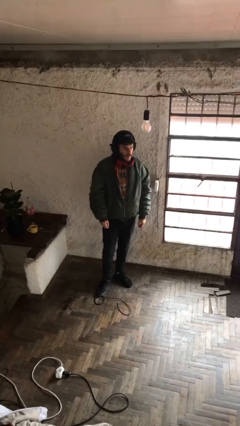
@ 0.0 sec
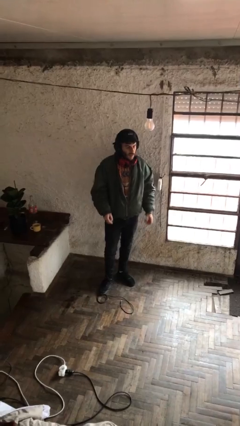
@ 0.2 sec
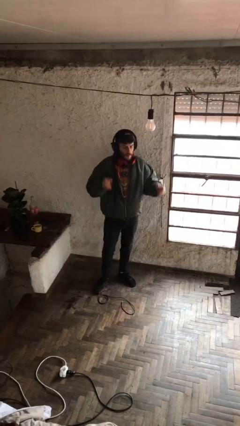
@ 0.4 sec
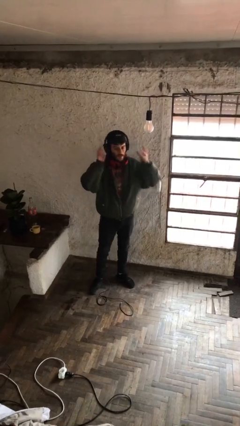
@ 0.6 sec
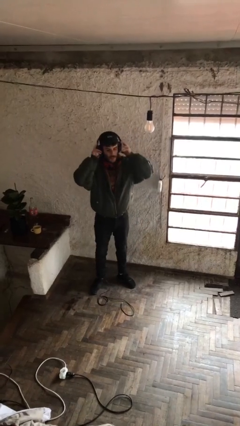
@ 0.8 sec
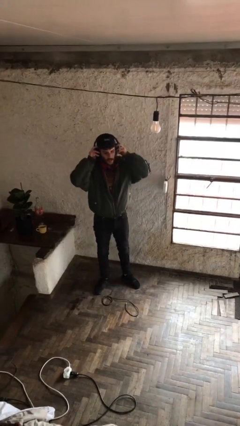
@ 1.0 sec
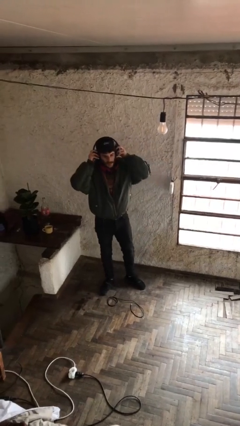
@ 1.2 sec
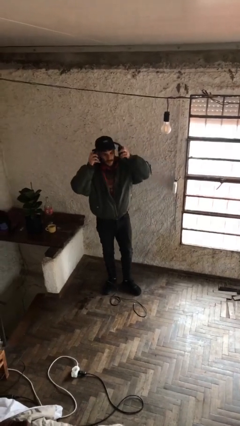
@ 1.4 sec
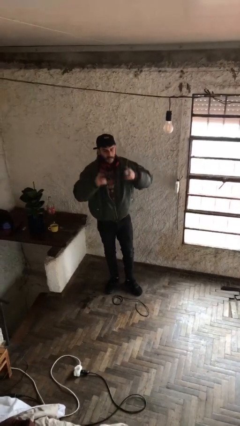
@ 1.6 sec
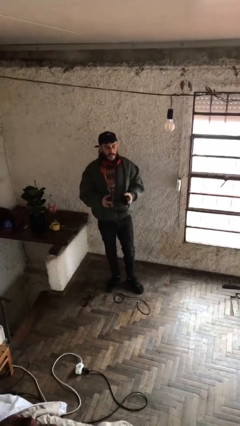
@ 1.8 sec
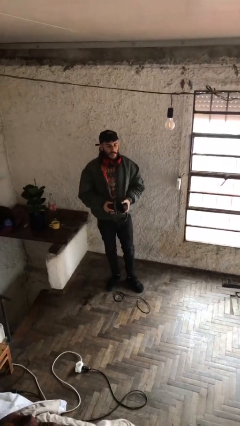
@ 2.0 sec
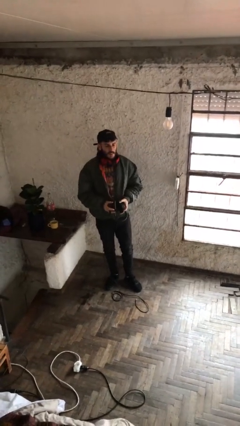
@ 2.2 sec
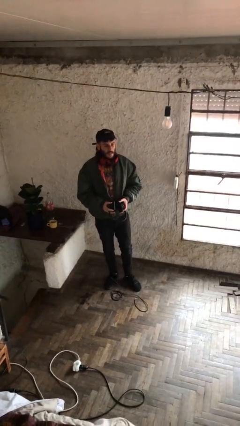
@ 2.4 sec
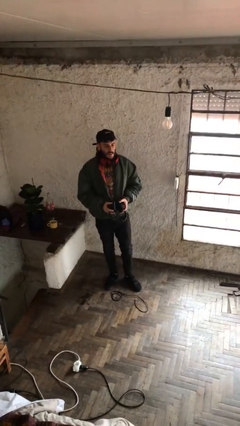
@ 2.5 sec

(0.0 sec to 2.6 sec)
person takes off headphones

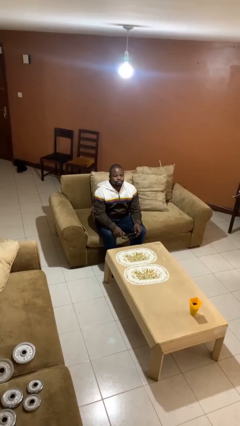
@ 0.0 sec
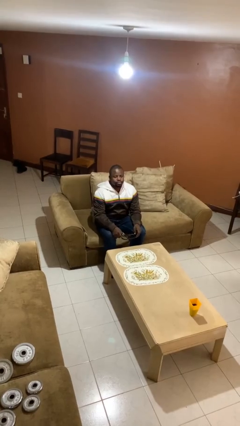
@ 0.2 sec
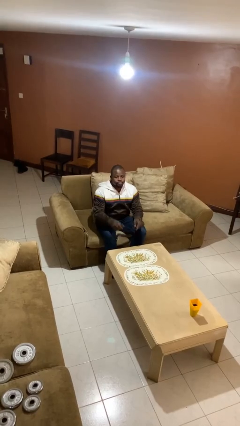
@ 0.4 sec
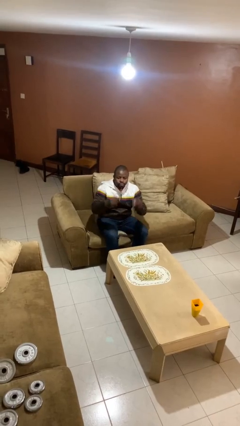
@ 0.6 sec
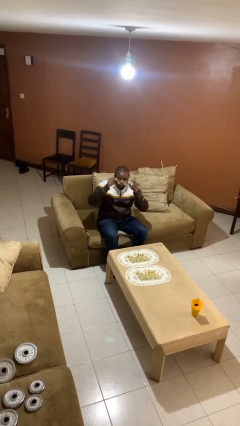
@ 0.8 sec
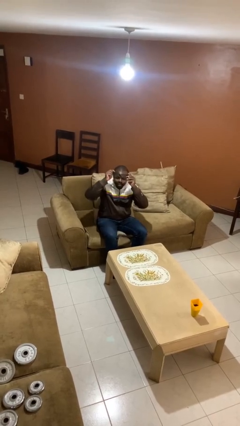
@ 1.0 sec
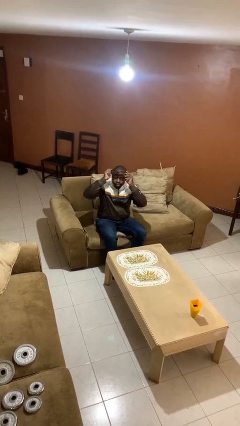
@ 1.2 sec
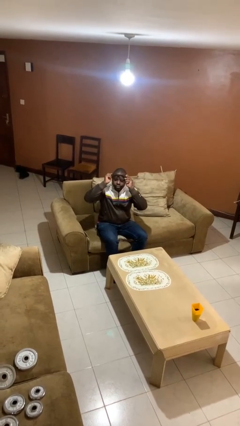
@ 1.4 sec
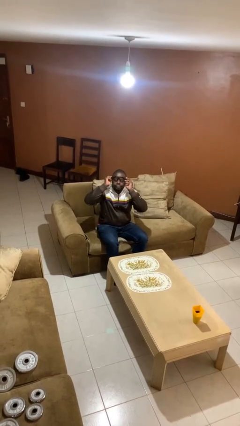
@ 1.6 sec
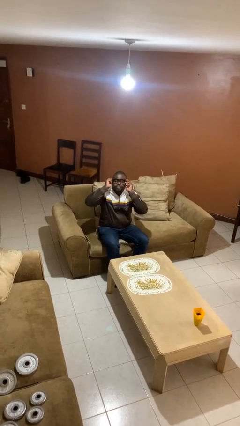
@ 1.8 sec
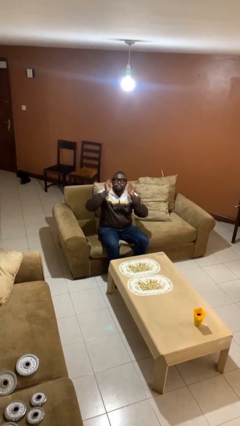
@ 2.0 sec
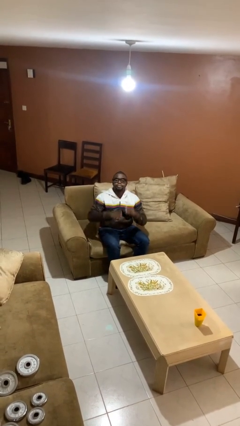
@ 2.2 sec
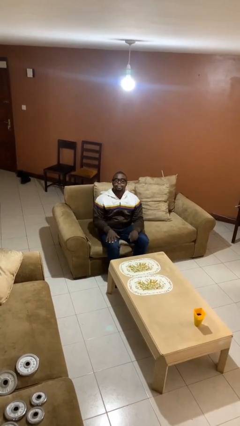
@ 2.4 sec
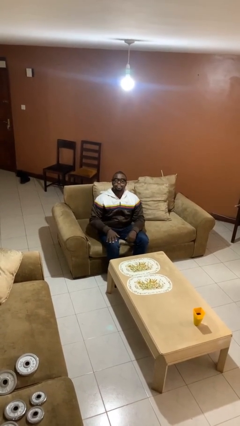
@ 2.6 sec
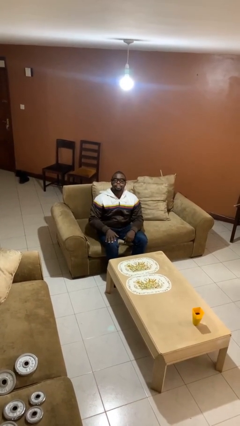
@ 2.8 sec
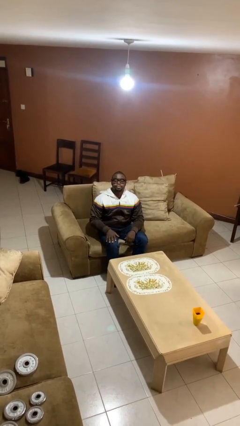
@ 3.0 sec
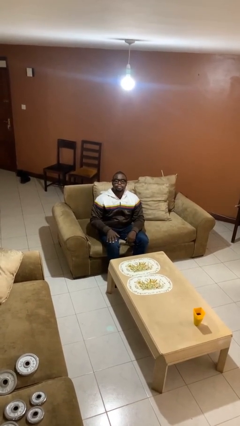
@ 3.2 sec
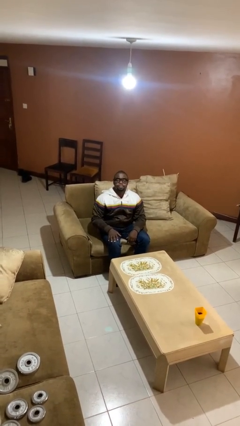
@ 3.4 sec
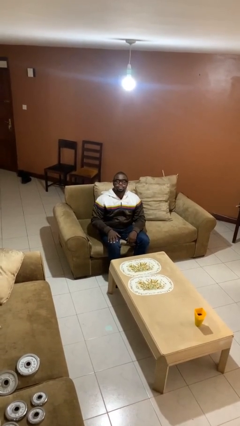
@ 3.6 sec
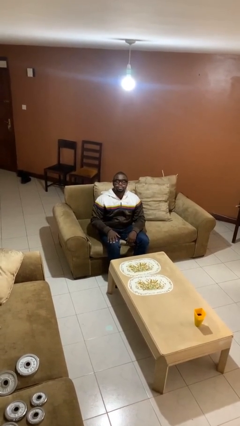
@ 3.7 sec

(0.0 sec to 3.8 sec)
person puts on glasses

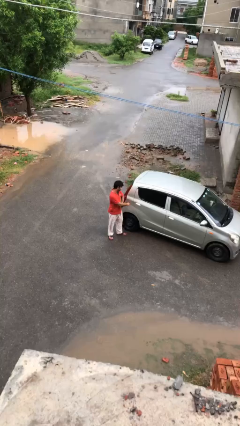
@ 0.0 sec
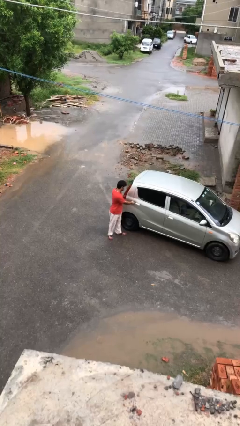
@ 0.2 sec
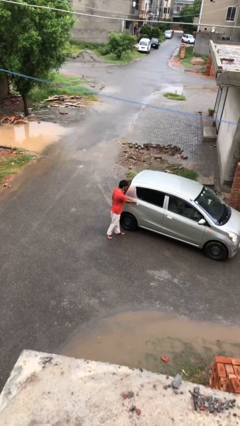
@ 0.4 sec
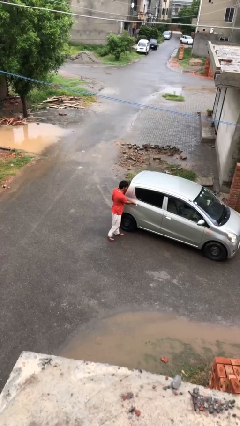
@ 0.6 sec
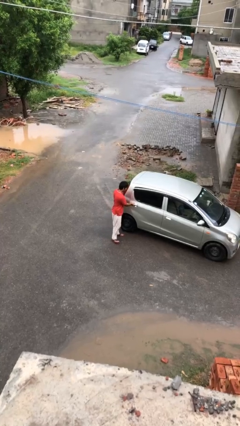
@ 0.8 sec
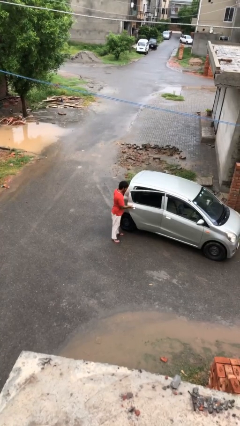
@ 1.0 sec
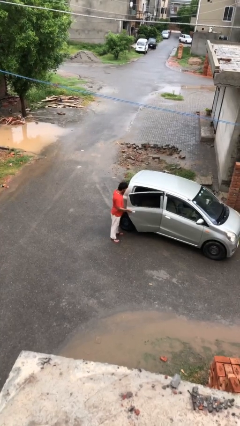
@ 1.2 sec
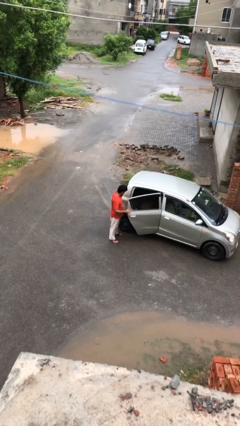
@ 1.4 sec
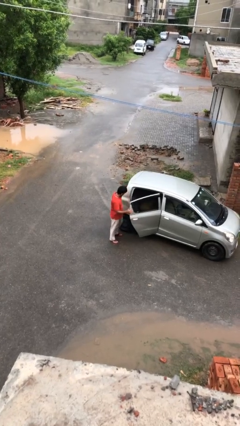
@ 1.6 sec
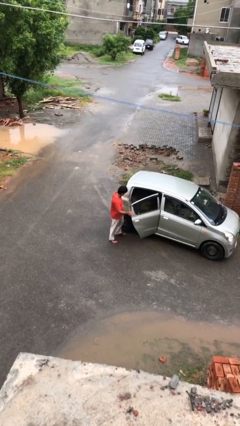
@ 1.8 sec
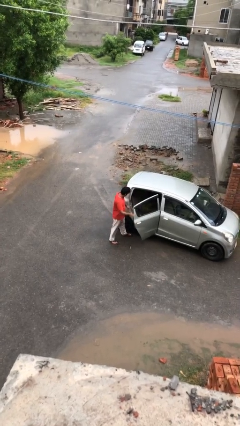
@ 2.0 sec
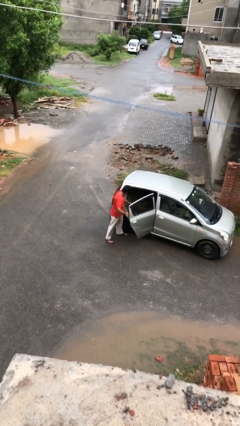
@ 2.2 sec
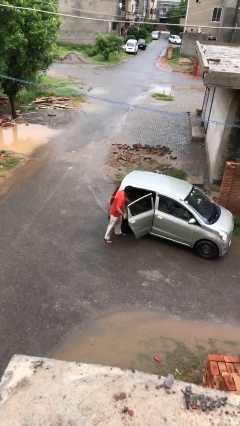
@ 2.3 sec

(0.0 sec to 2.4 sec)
person opens car door

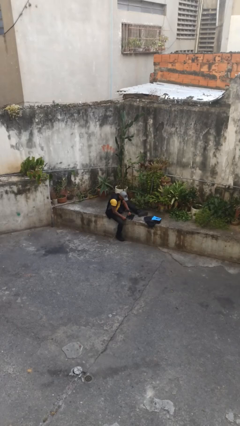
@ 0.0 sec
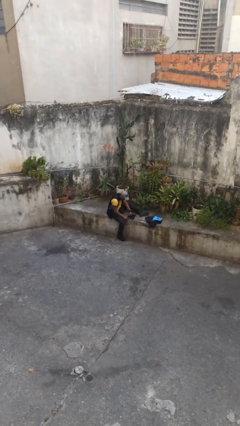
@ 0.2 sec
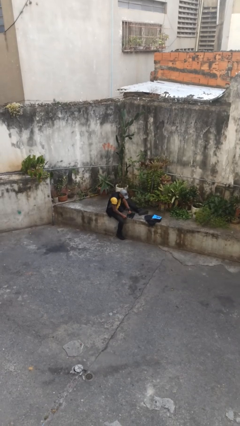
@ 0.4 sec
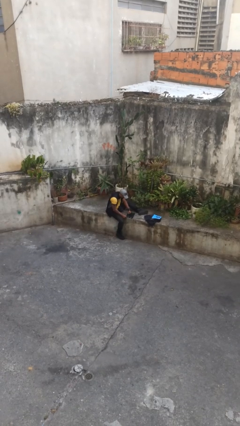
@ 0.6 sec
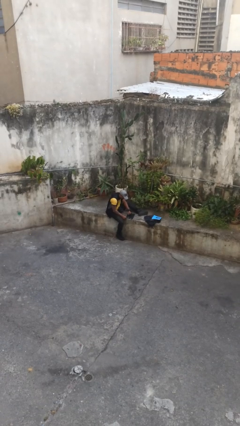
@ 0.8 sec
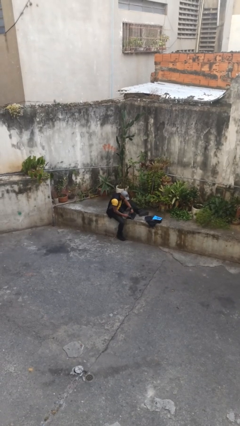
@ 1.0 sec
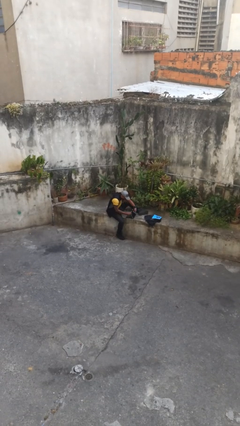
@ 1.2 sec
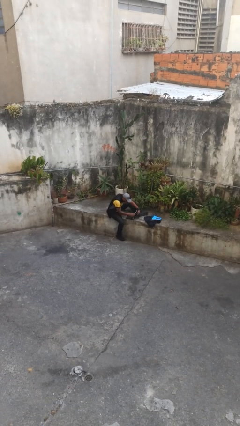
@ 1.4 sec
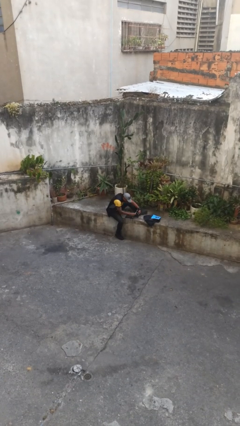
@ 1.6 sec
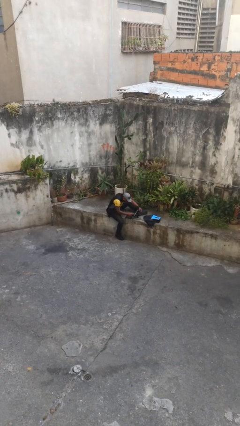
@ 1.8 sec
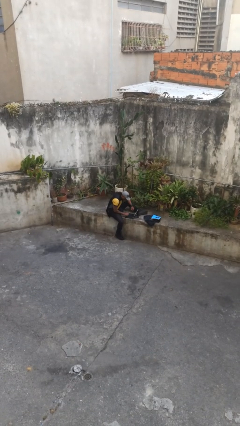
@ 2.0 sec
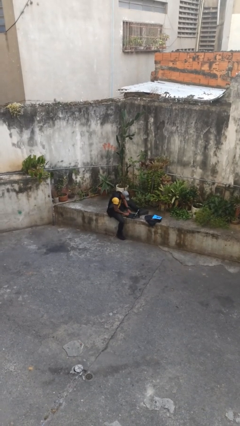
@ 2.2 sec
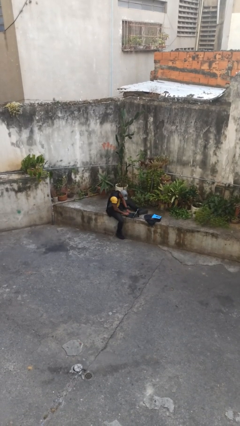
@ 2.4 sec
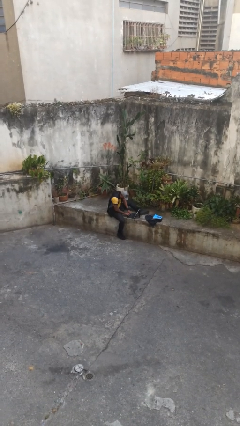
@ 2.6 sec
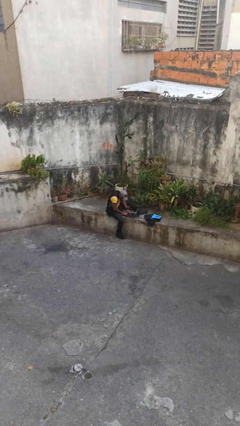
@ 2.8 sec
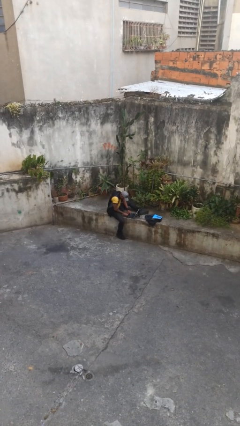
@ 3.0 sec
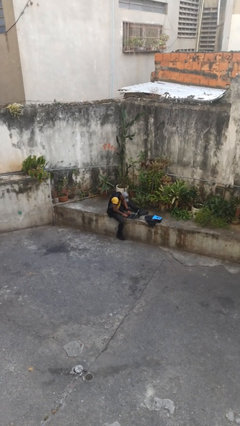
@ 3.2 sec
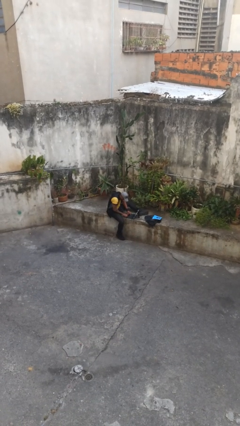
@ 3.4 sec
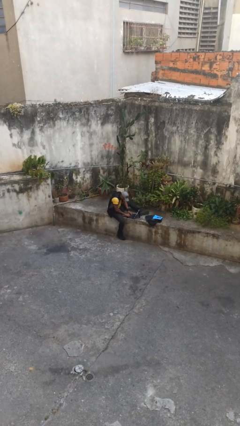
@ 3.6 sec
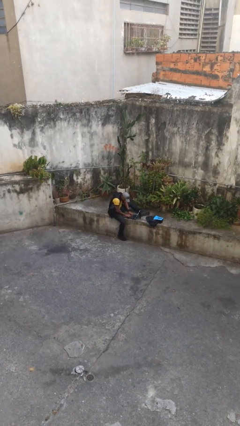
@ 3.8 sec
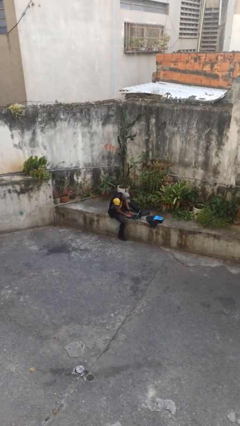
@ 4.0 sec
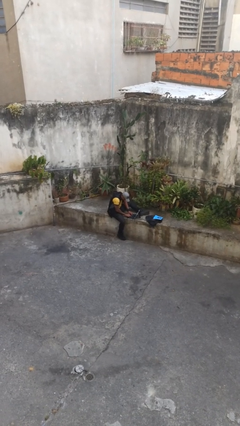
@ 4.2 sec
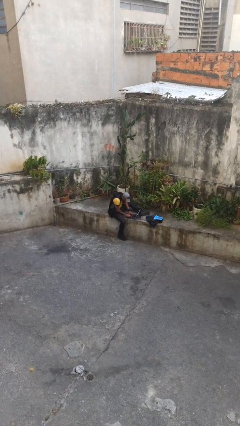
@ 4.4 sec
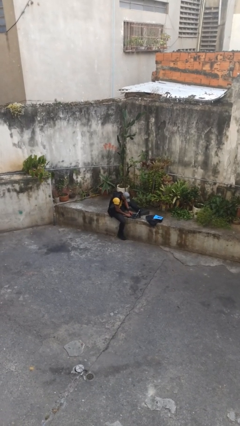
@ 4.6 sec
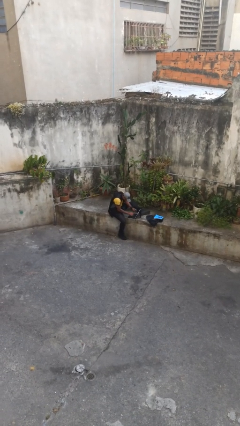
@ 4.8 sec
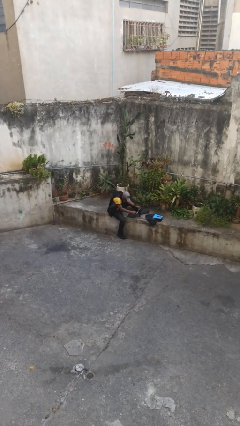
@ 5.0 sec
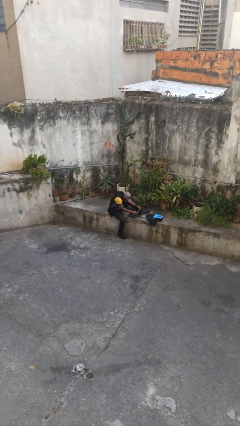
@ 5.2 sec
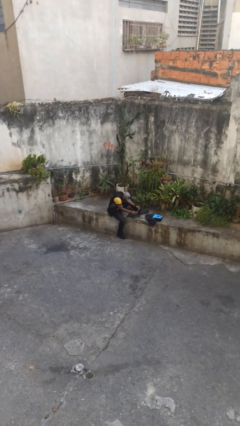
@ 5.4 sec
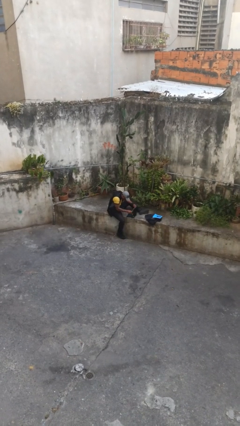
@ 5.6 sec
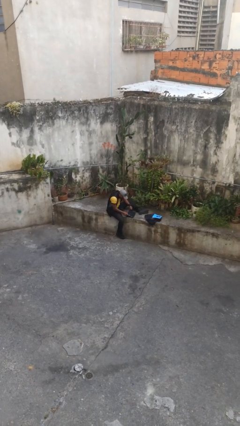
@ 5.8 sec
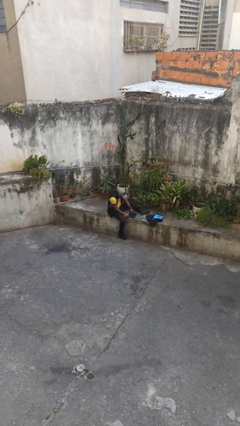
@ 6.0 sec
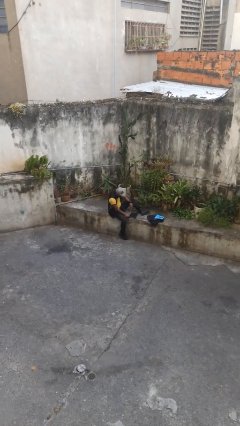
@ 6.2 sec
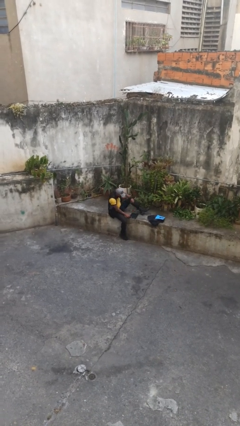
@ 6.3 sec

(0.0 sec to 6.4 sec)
person interacts with laptop

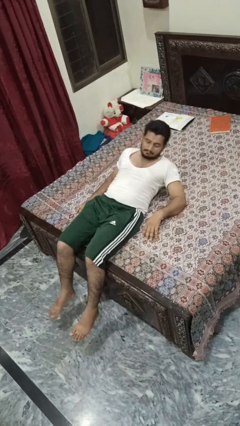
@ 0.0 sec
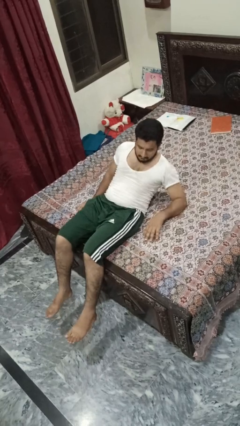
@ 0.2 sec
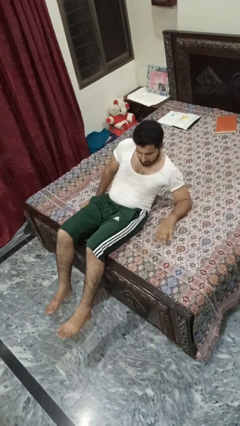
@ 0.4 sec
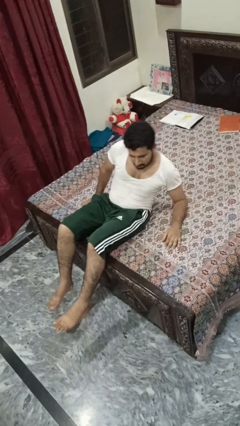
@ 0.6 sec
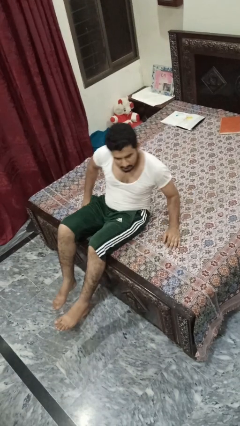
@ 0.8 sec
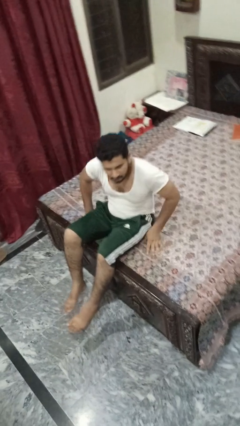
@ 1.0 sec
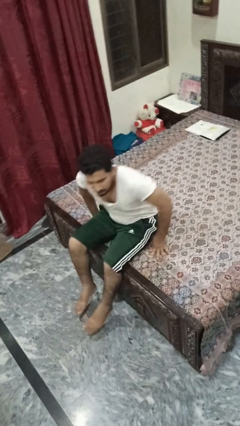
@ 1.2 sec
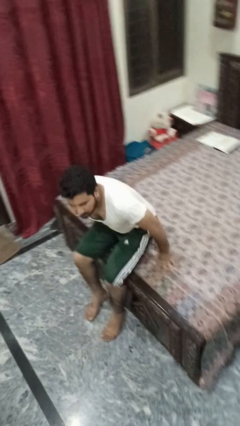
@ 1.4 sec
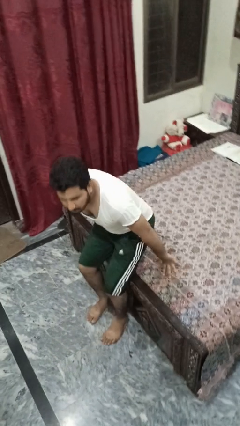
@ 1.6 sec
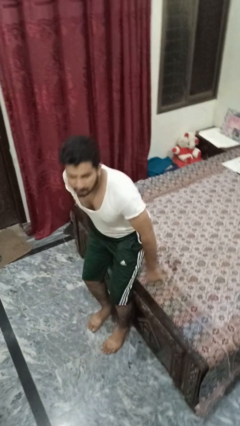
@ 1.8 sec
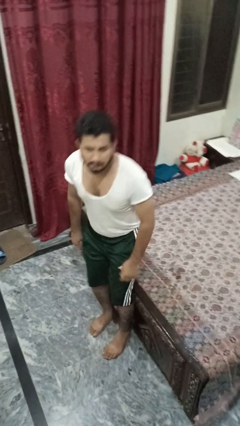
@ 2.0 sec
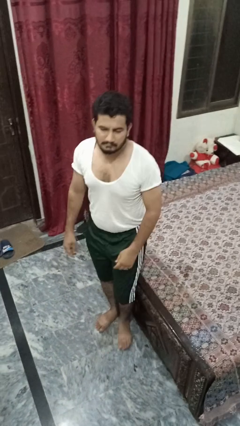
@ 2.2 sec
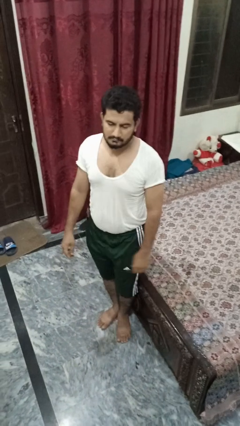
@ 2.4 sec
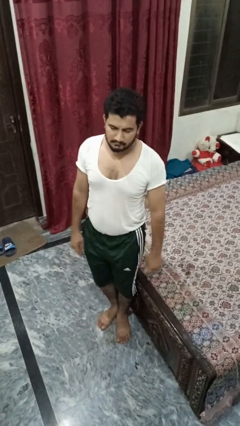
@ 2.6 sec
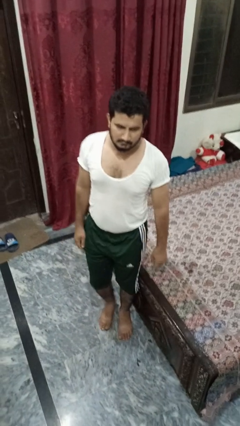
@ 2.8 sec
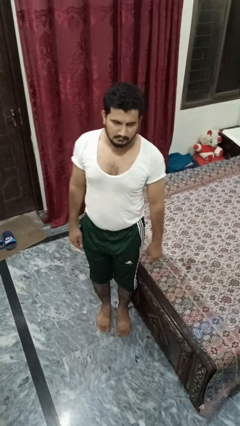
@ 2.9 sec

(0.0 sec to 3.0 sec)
person stands up
